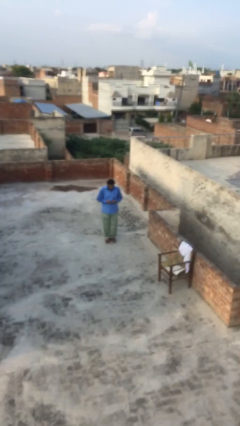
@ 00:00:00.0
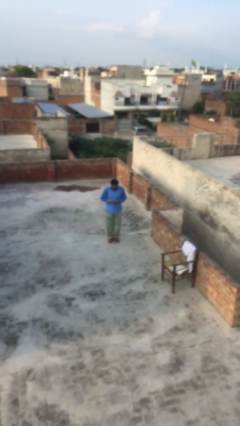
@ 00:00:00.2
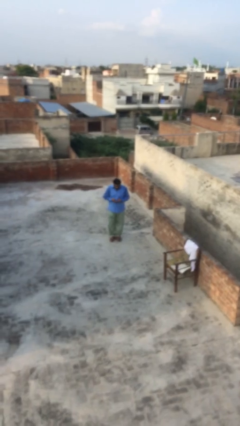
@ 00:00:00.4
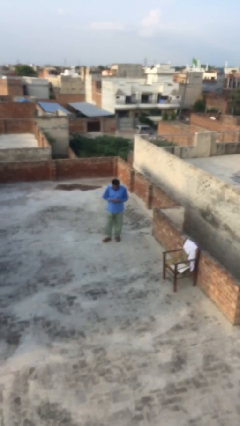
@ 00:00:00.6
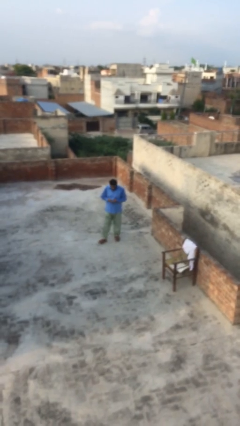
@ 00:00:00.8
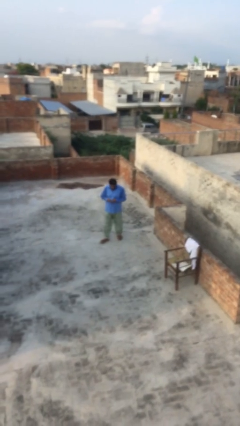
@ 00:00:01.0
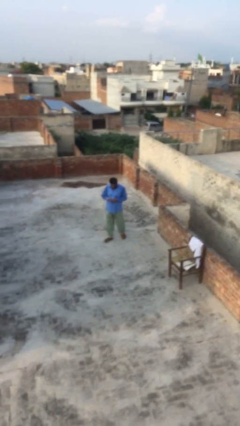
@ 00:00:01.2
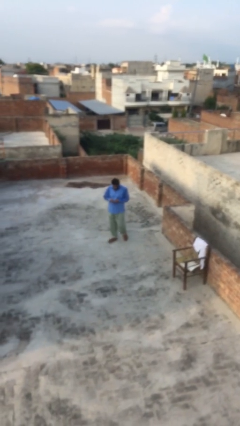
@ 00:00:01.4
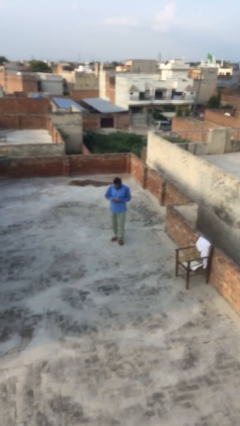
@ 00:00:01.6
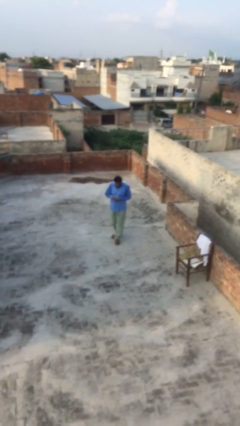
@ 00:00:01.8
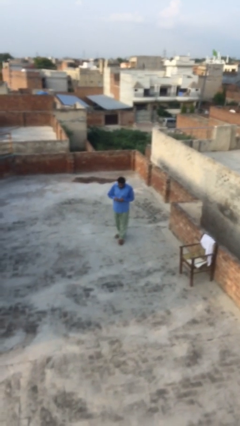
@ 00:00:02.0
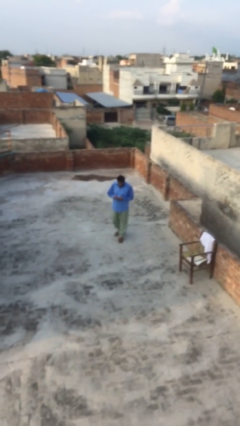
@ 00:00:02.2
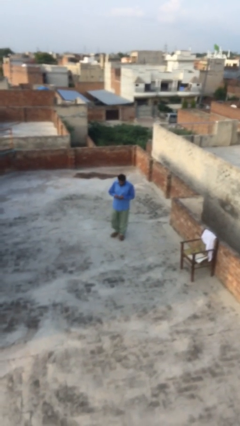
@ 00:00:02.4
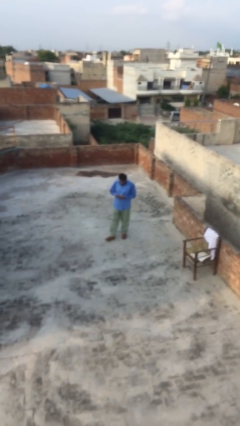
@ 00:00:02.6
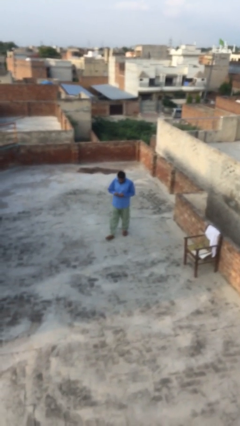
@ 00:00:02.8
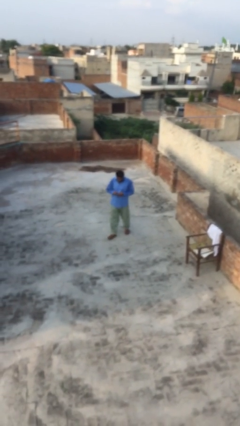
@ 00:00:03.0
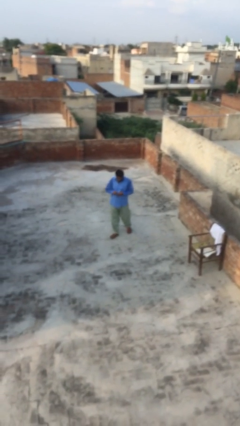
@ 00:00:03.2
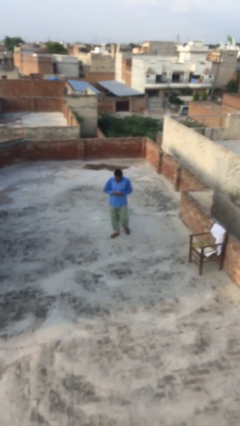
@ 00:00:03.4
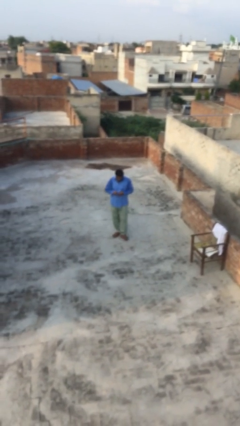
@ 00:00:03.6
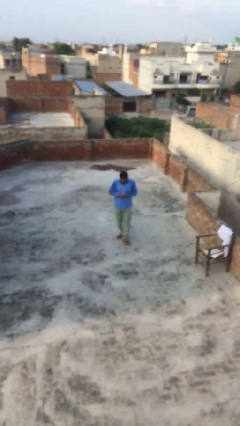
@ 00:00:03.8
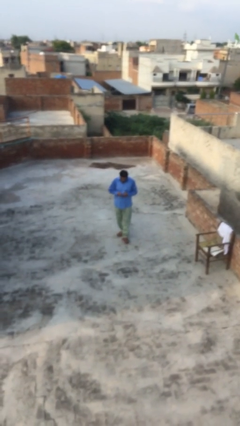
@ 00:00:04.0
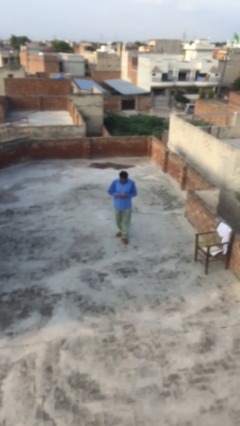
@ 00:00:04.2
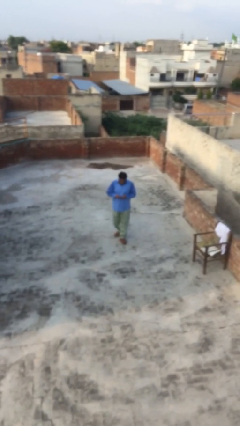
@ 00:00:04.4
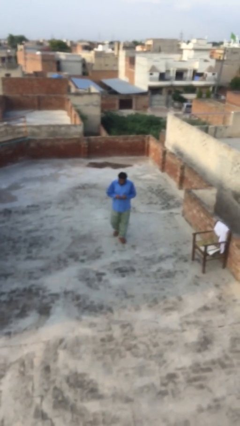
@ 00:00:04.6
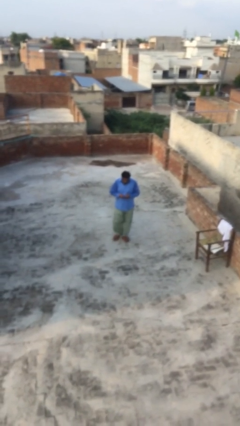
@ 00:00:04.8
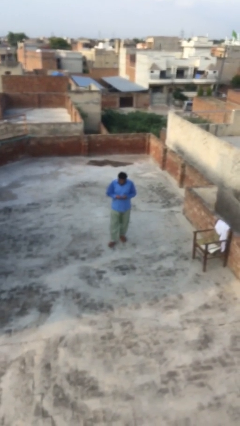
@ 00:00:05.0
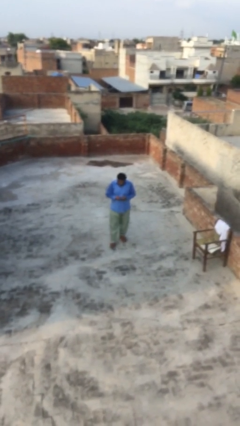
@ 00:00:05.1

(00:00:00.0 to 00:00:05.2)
person texts on phone

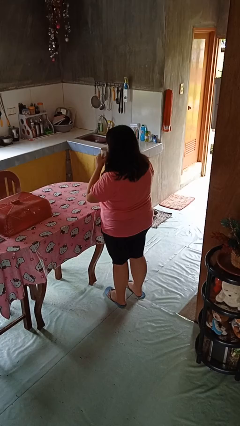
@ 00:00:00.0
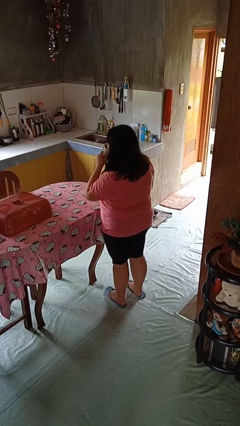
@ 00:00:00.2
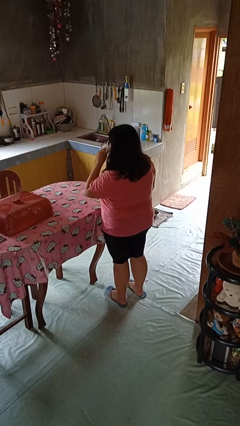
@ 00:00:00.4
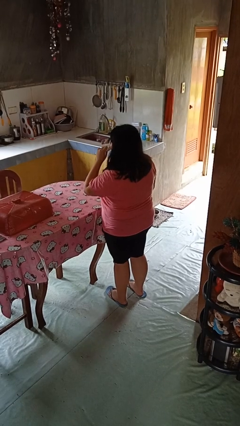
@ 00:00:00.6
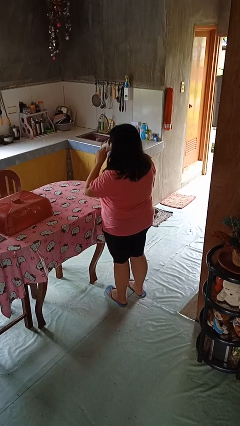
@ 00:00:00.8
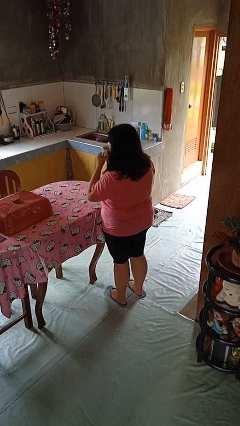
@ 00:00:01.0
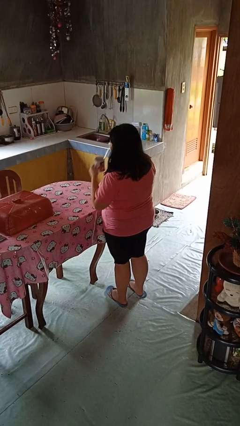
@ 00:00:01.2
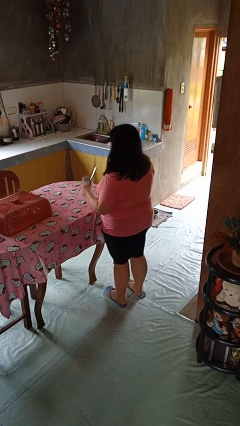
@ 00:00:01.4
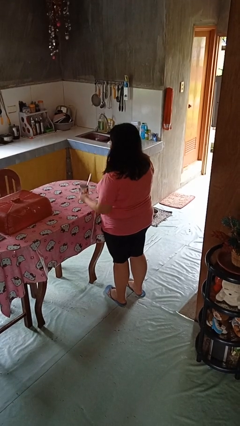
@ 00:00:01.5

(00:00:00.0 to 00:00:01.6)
person drinks from mug

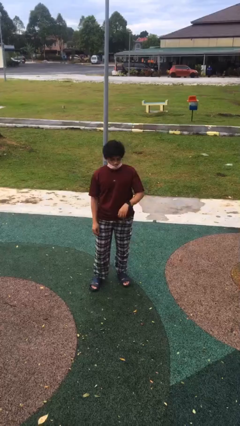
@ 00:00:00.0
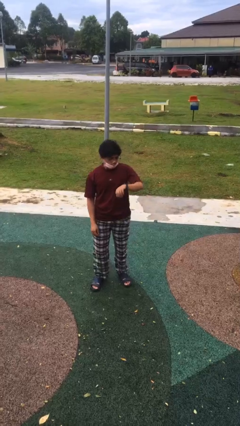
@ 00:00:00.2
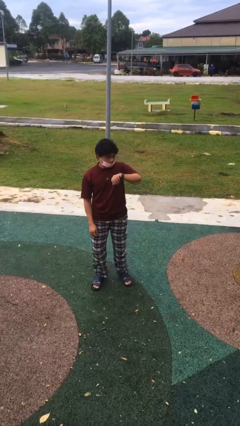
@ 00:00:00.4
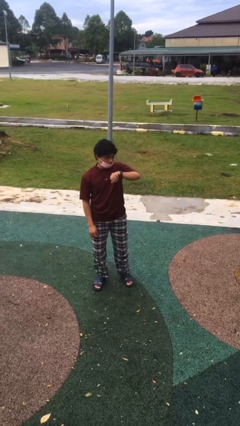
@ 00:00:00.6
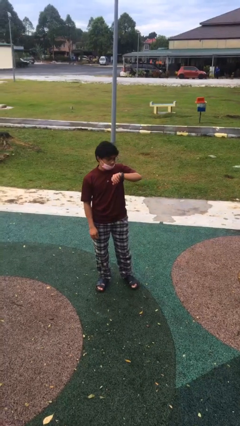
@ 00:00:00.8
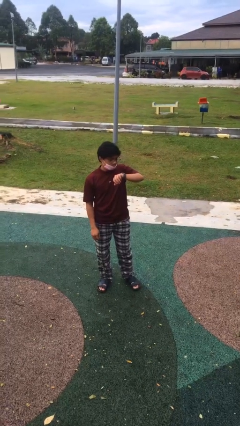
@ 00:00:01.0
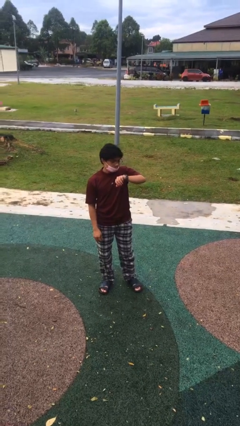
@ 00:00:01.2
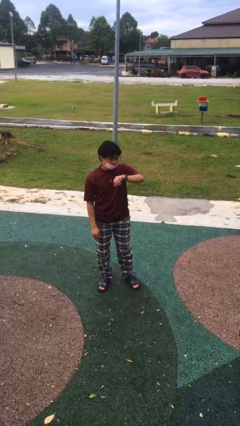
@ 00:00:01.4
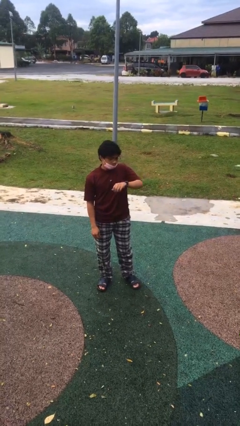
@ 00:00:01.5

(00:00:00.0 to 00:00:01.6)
person looks at wristwatch

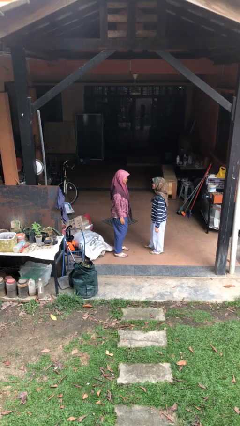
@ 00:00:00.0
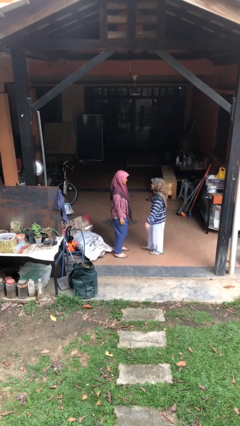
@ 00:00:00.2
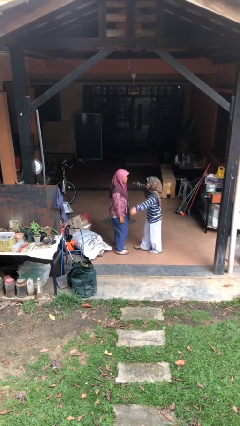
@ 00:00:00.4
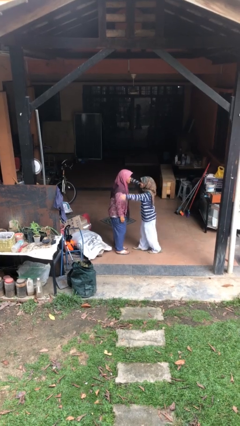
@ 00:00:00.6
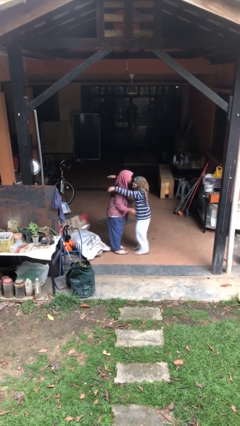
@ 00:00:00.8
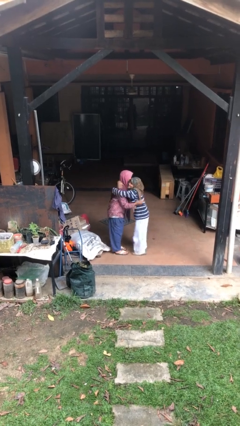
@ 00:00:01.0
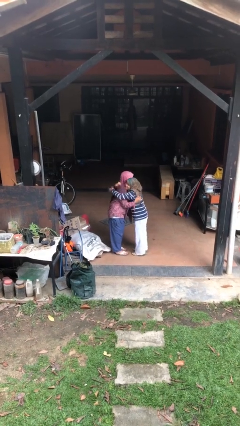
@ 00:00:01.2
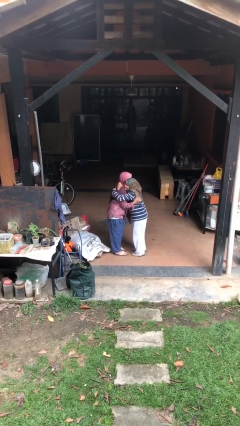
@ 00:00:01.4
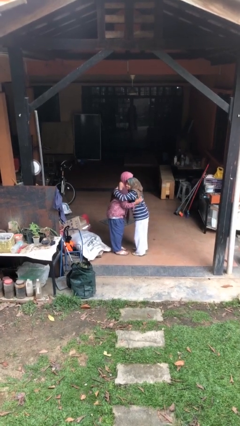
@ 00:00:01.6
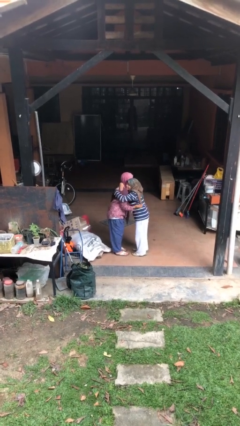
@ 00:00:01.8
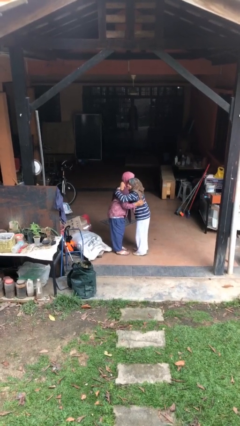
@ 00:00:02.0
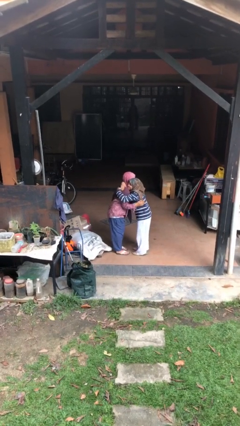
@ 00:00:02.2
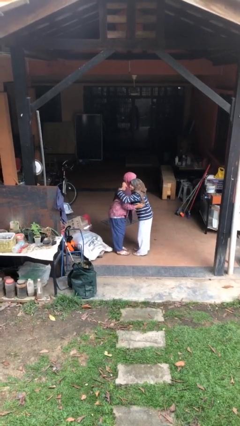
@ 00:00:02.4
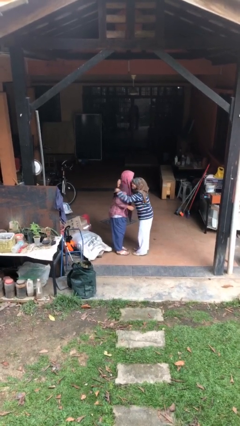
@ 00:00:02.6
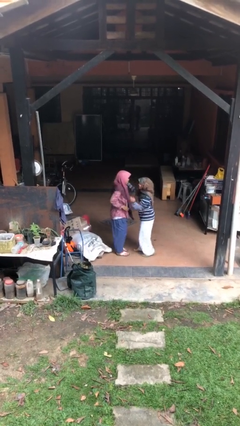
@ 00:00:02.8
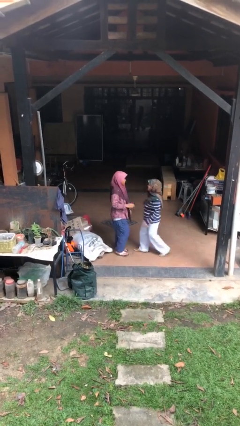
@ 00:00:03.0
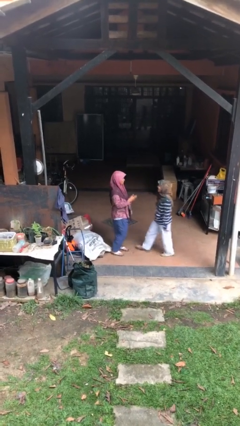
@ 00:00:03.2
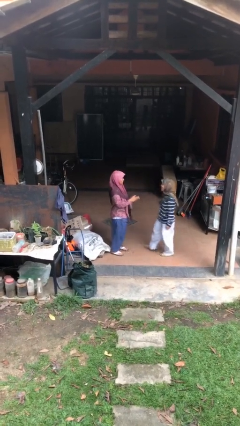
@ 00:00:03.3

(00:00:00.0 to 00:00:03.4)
person embraces person

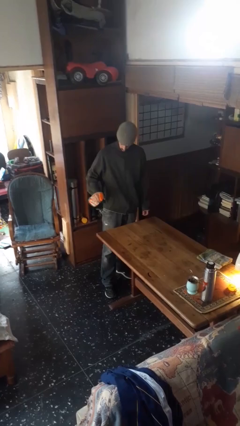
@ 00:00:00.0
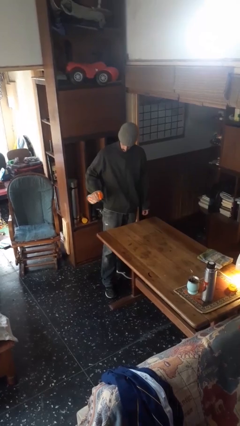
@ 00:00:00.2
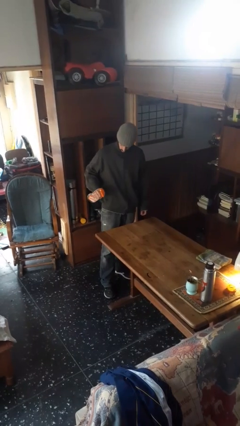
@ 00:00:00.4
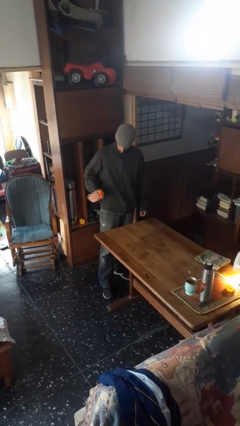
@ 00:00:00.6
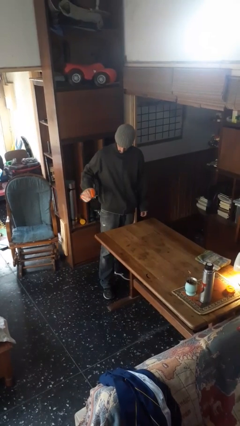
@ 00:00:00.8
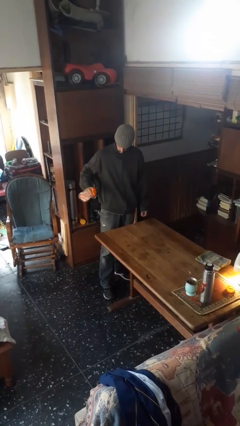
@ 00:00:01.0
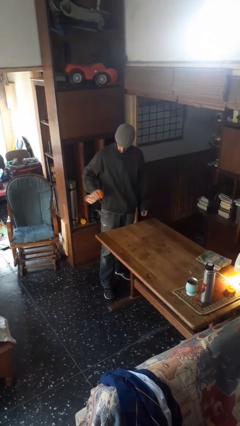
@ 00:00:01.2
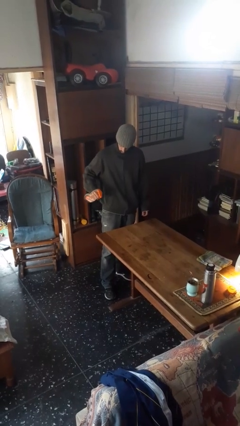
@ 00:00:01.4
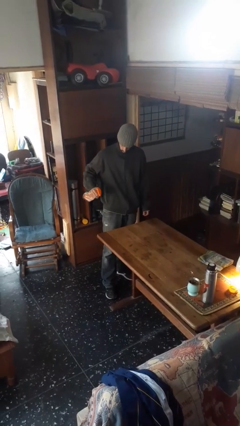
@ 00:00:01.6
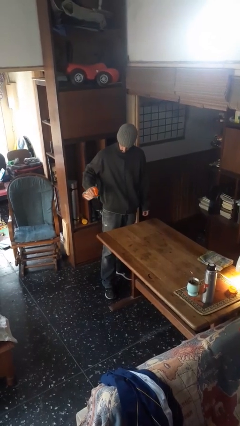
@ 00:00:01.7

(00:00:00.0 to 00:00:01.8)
person sprays from bottle

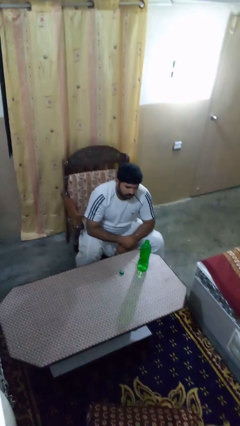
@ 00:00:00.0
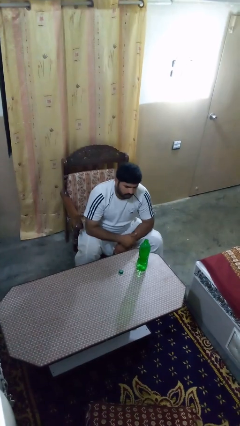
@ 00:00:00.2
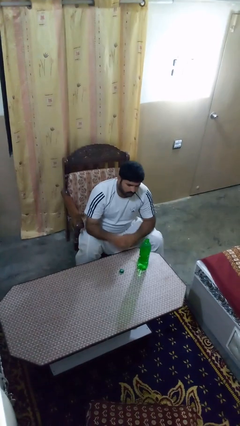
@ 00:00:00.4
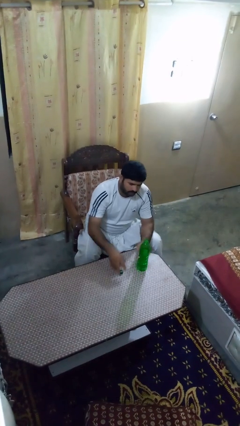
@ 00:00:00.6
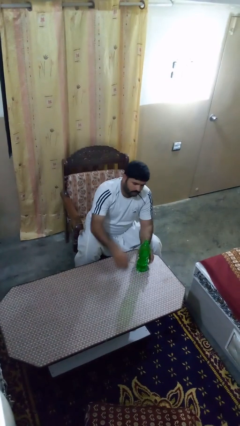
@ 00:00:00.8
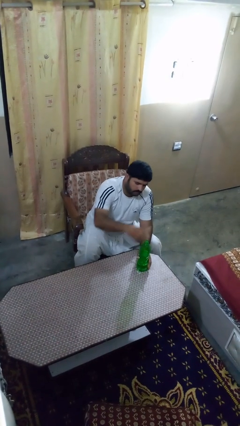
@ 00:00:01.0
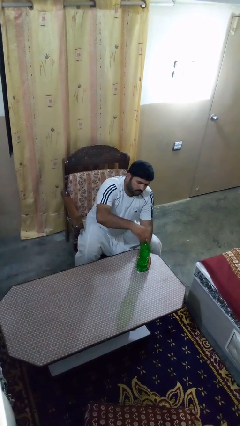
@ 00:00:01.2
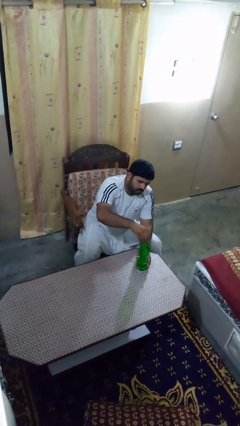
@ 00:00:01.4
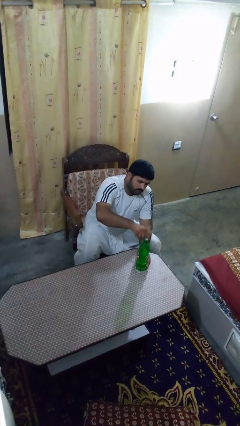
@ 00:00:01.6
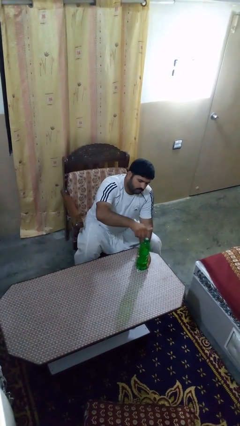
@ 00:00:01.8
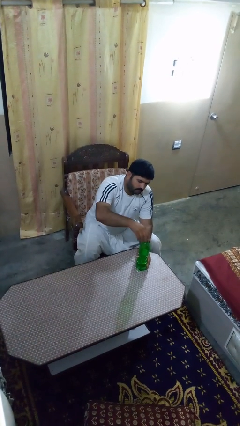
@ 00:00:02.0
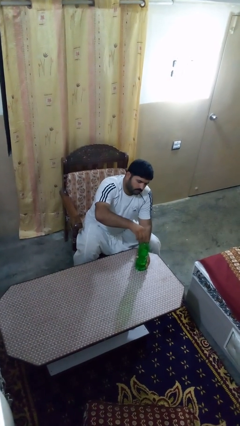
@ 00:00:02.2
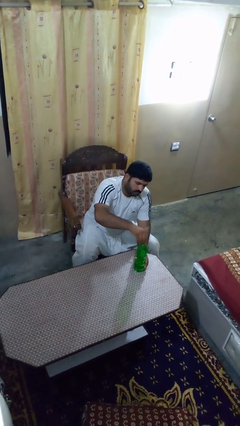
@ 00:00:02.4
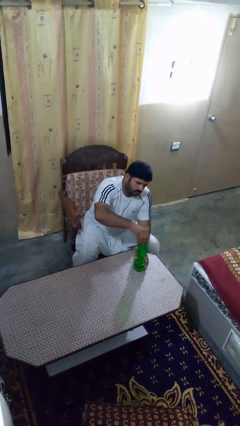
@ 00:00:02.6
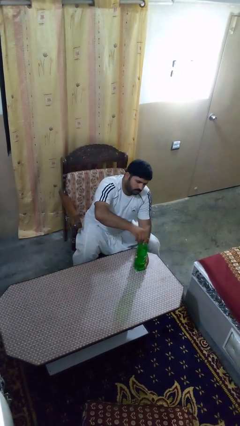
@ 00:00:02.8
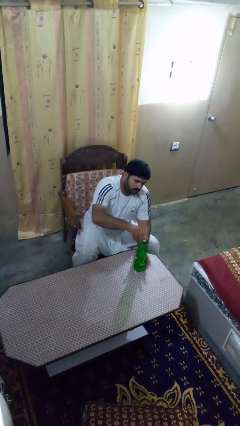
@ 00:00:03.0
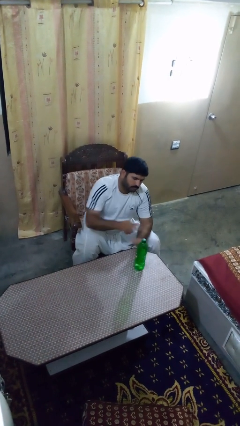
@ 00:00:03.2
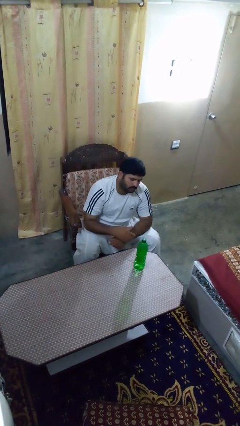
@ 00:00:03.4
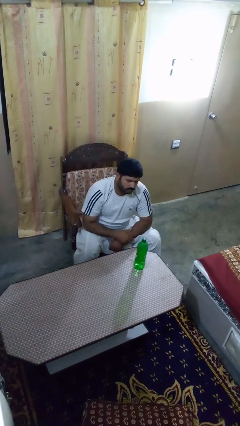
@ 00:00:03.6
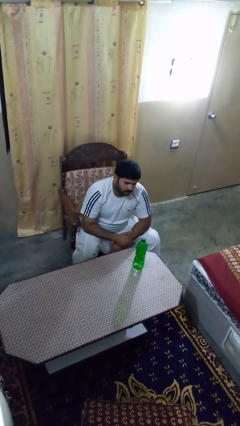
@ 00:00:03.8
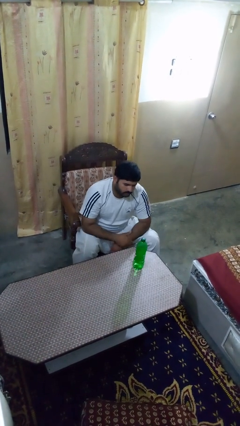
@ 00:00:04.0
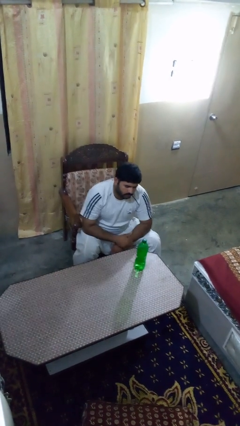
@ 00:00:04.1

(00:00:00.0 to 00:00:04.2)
person screws lid to bottle
